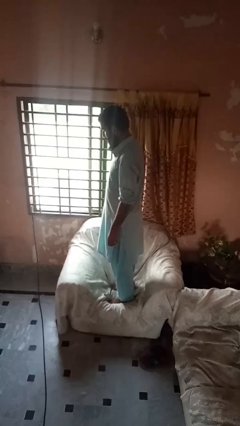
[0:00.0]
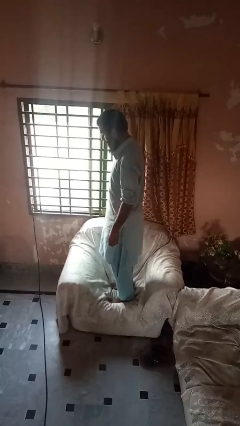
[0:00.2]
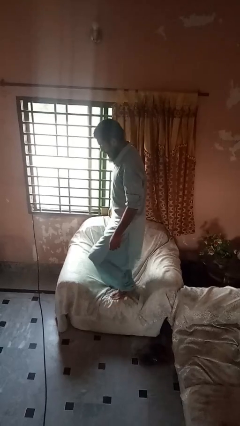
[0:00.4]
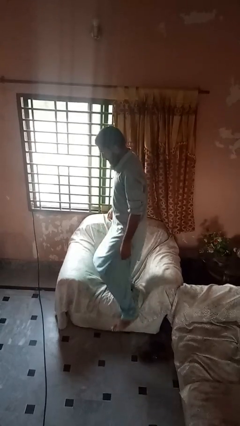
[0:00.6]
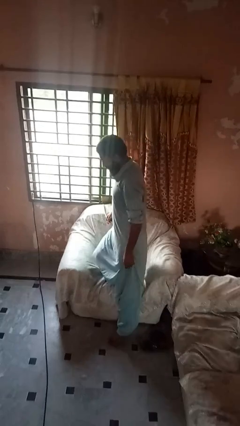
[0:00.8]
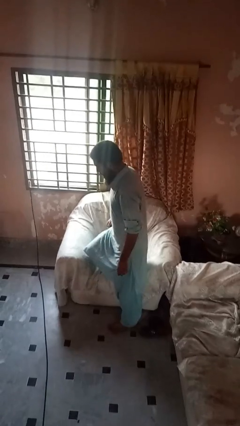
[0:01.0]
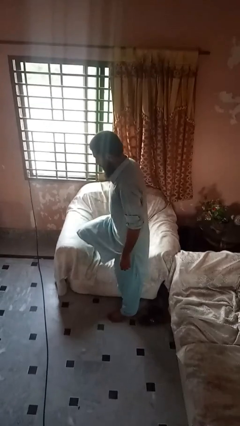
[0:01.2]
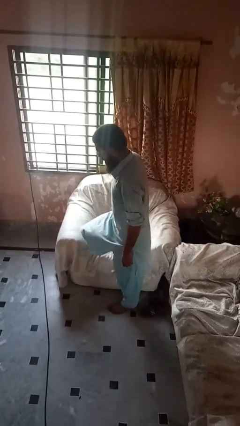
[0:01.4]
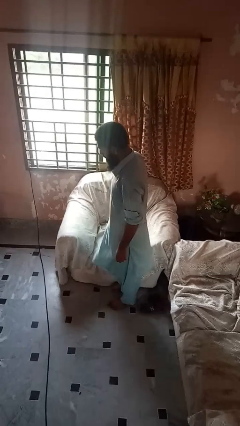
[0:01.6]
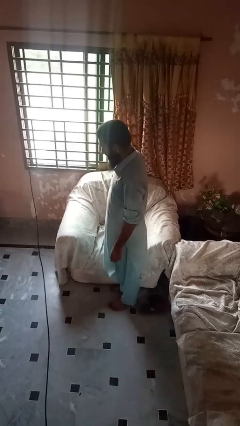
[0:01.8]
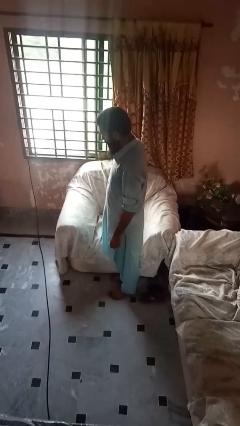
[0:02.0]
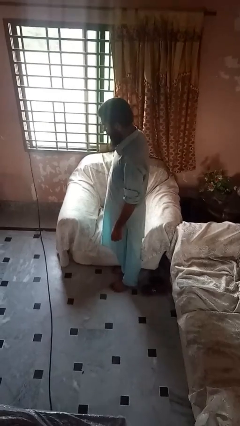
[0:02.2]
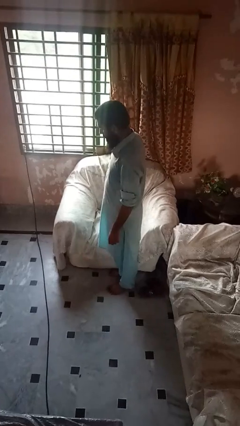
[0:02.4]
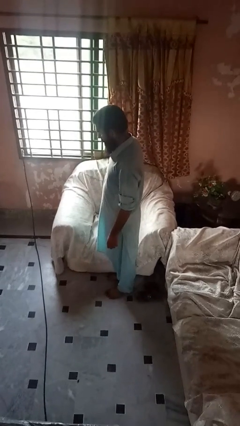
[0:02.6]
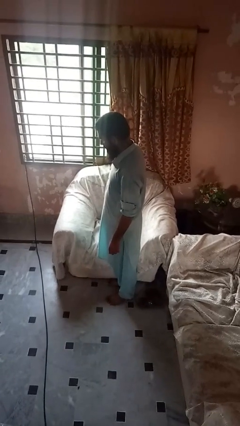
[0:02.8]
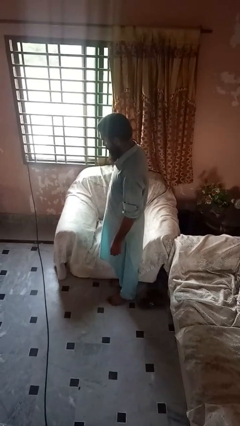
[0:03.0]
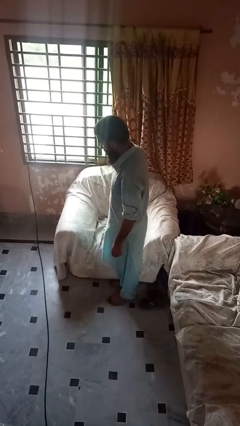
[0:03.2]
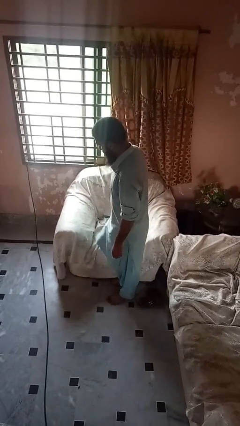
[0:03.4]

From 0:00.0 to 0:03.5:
person climbs off couch

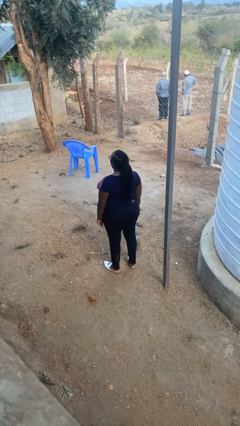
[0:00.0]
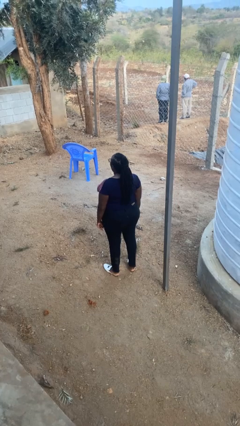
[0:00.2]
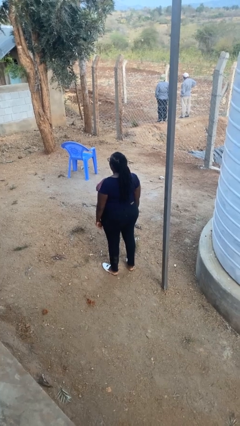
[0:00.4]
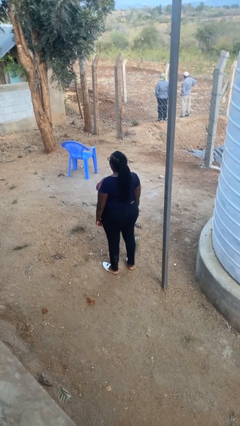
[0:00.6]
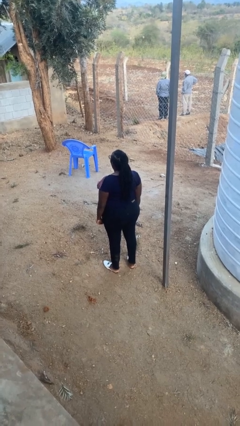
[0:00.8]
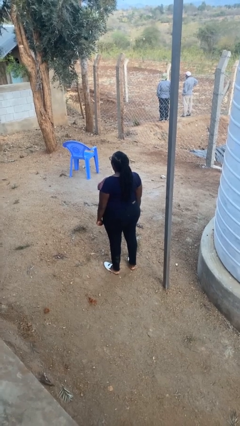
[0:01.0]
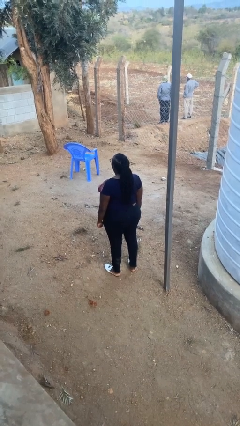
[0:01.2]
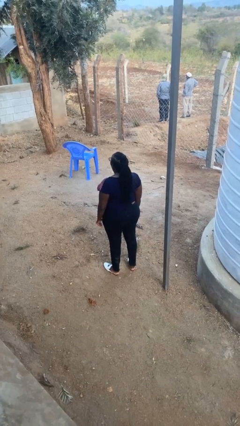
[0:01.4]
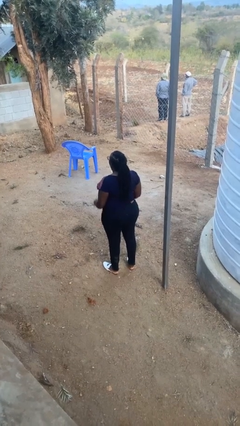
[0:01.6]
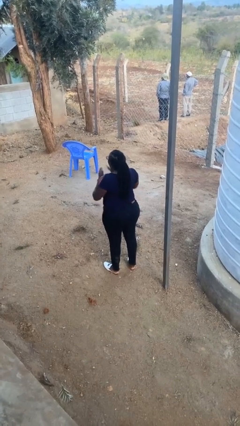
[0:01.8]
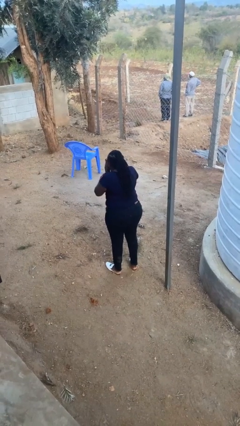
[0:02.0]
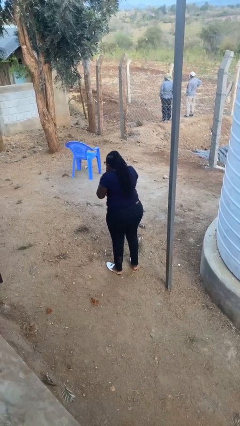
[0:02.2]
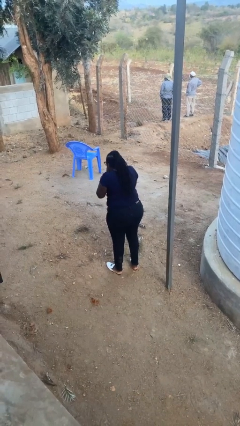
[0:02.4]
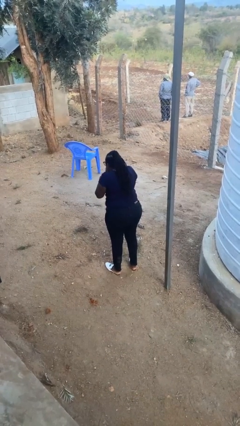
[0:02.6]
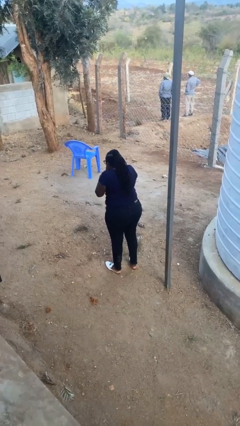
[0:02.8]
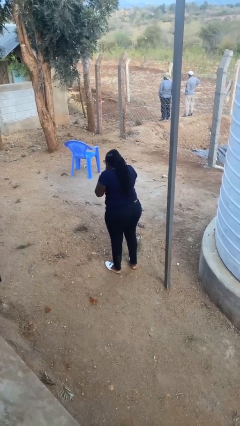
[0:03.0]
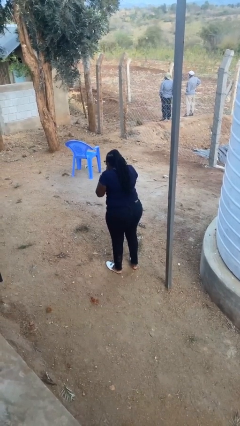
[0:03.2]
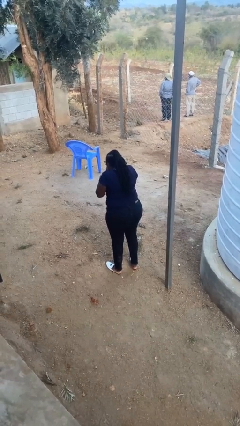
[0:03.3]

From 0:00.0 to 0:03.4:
person sneezes into hand

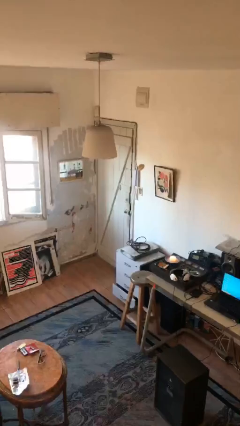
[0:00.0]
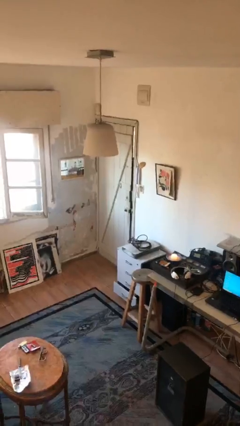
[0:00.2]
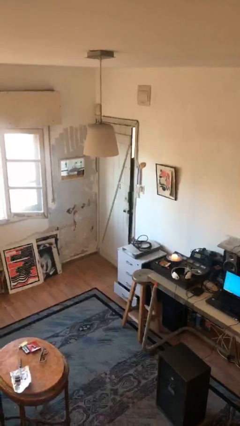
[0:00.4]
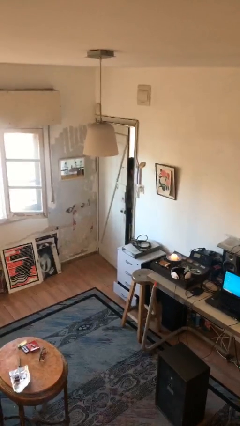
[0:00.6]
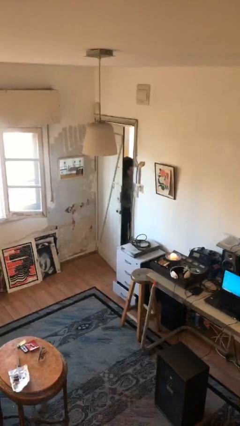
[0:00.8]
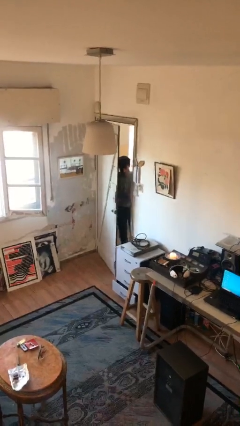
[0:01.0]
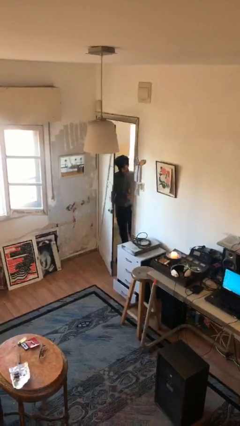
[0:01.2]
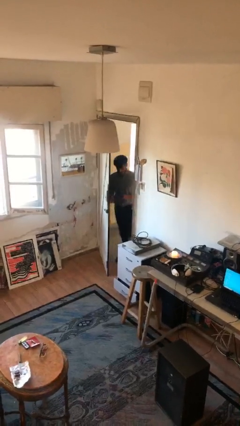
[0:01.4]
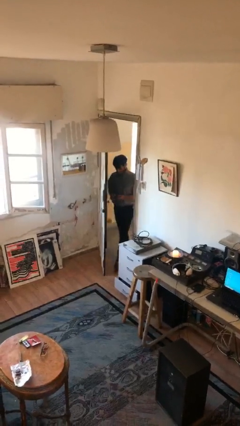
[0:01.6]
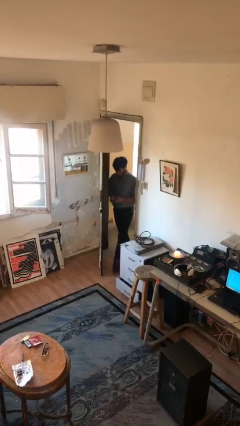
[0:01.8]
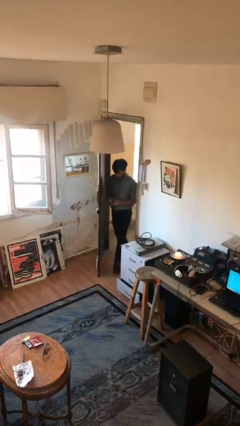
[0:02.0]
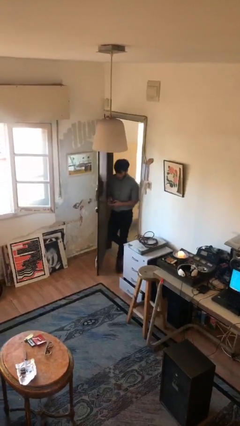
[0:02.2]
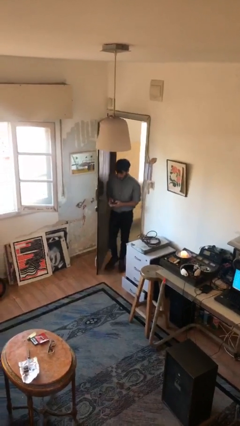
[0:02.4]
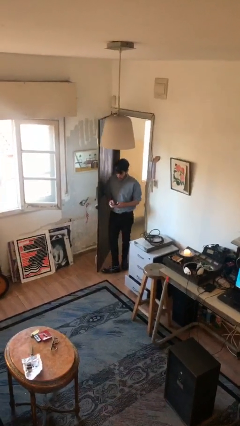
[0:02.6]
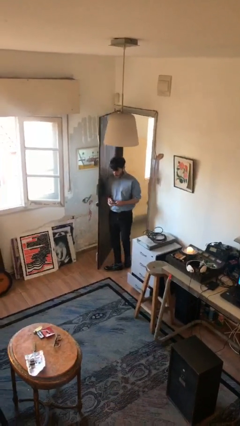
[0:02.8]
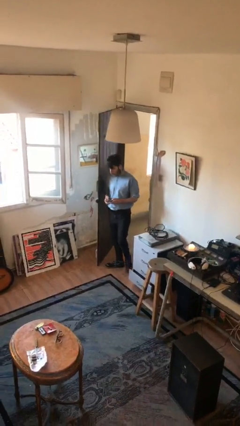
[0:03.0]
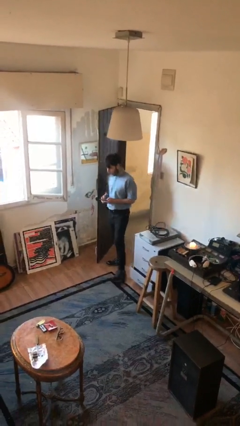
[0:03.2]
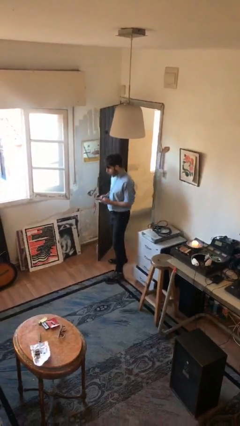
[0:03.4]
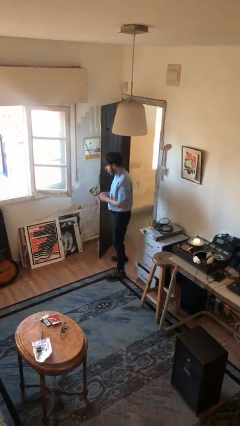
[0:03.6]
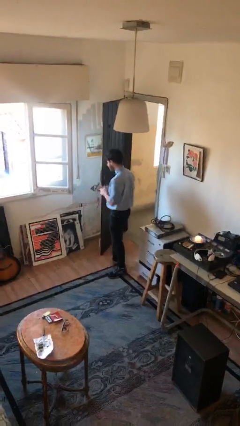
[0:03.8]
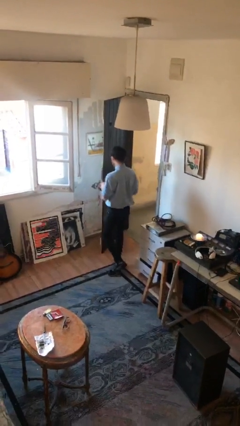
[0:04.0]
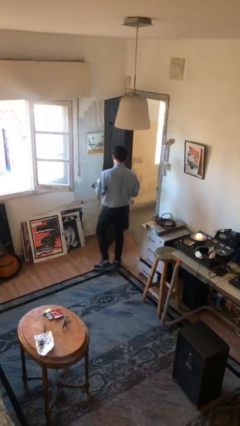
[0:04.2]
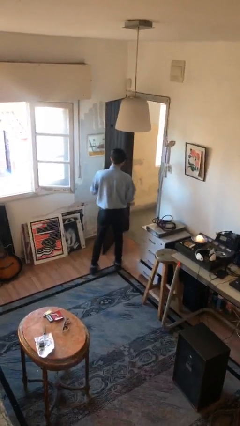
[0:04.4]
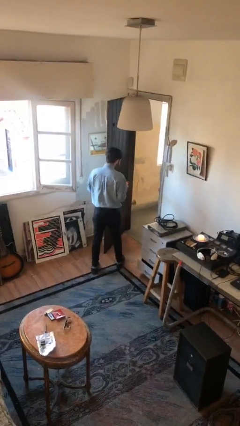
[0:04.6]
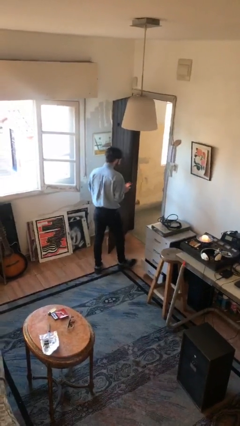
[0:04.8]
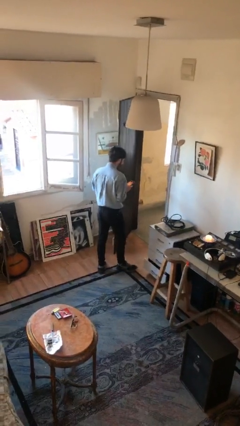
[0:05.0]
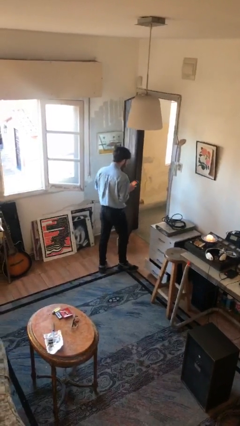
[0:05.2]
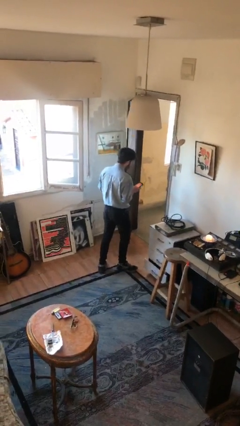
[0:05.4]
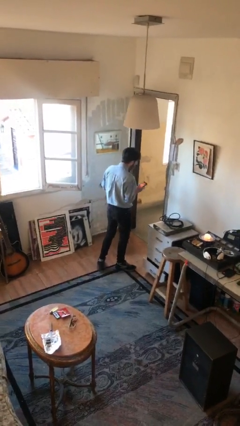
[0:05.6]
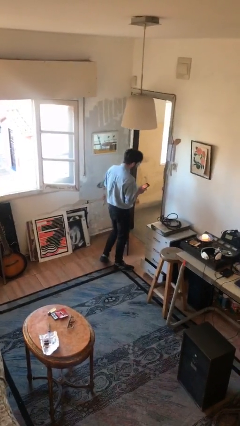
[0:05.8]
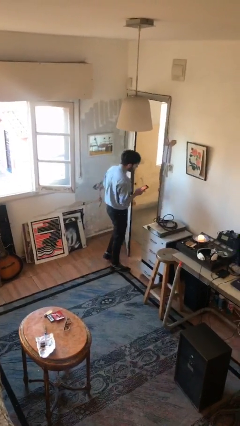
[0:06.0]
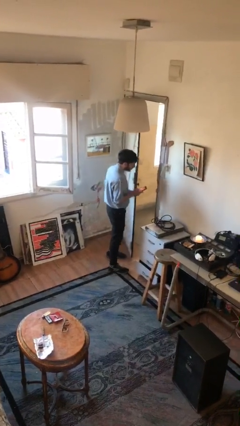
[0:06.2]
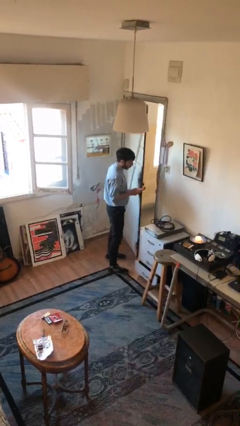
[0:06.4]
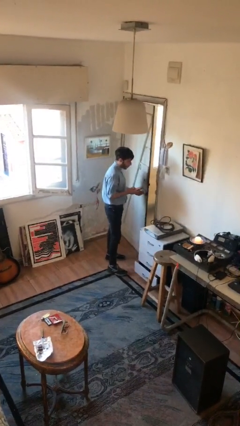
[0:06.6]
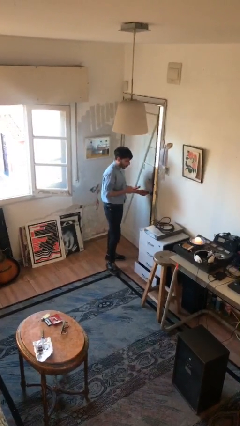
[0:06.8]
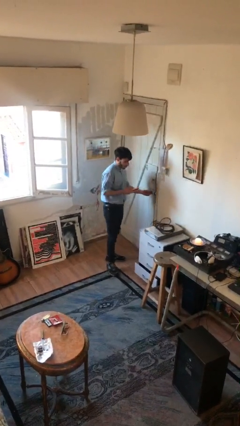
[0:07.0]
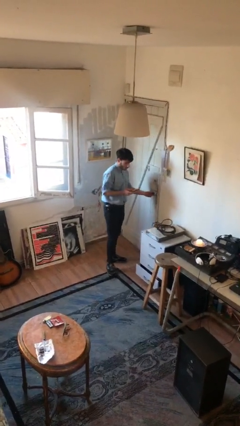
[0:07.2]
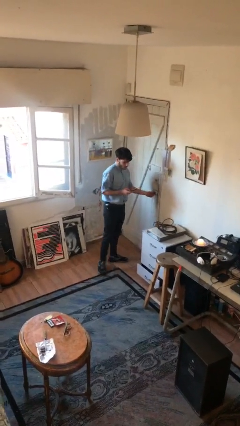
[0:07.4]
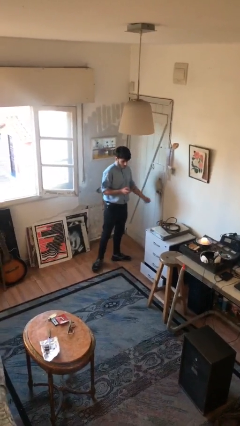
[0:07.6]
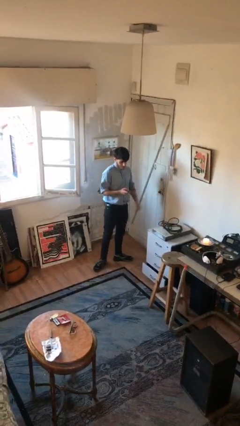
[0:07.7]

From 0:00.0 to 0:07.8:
person texts on phone

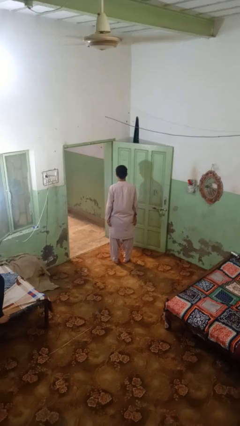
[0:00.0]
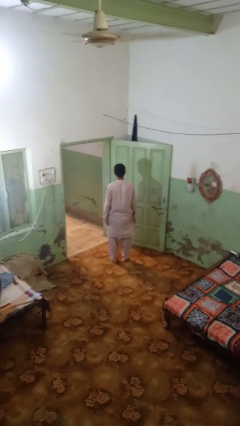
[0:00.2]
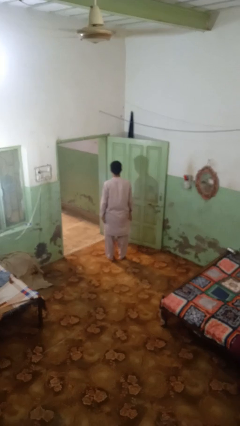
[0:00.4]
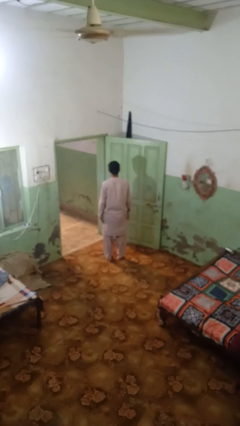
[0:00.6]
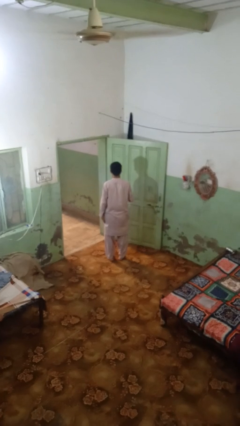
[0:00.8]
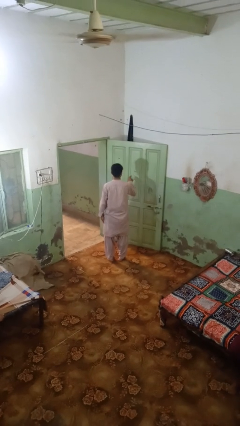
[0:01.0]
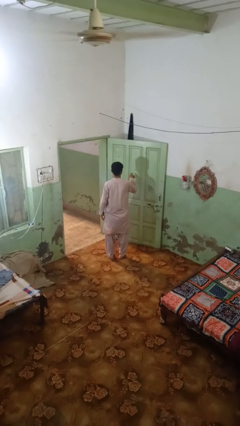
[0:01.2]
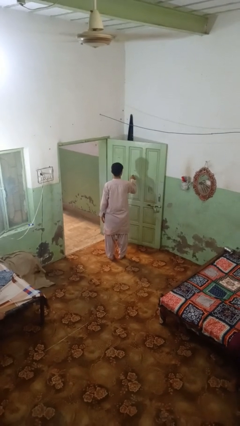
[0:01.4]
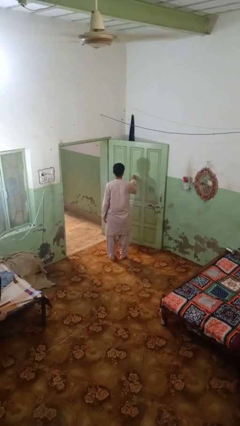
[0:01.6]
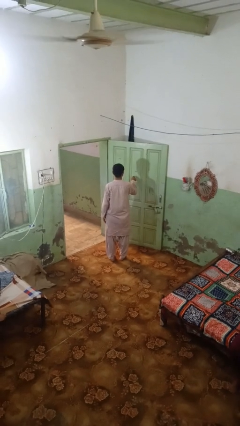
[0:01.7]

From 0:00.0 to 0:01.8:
person taps object with finger

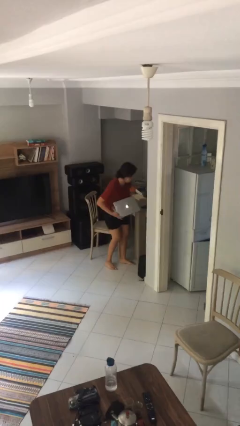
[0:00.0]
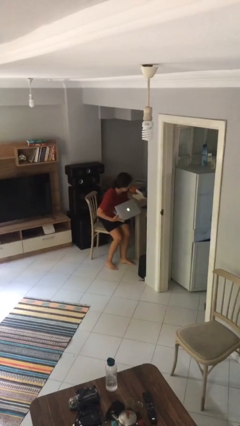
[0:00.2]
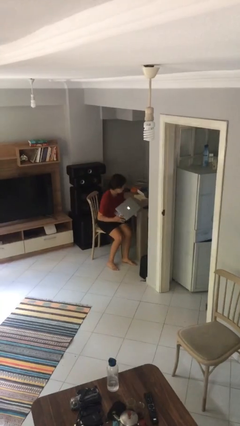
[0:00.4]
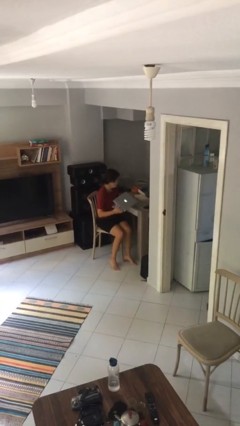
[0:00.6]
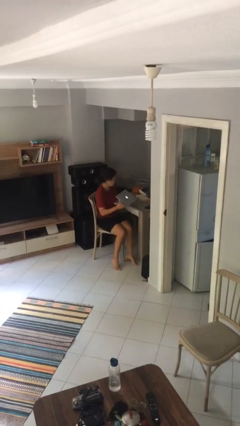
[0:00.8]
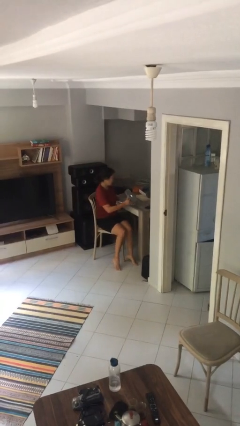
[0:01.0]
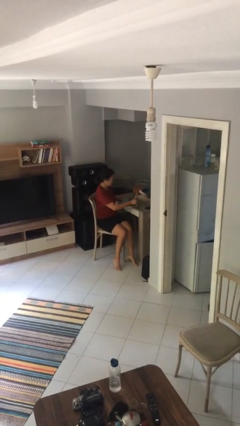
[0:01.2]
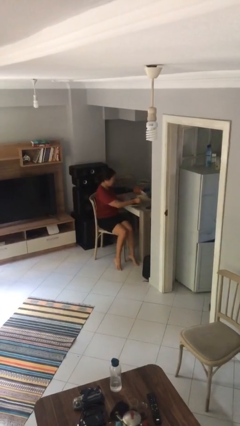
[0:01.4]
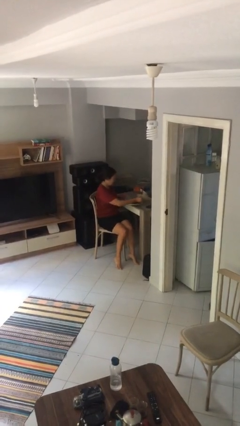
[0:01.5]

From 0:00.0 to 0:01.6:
person sits down
